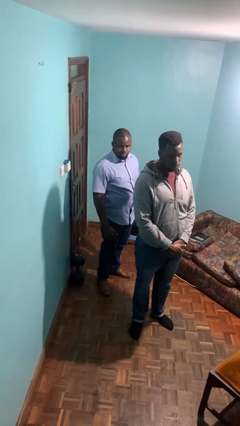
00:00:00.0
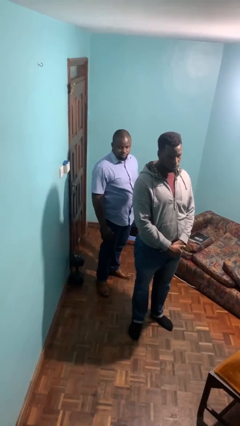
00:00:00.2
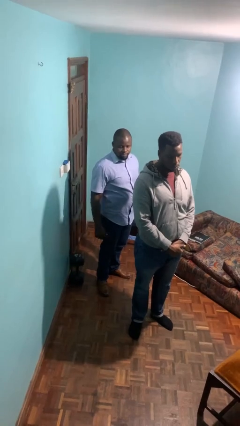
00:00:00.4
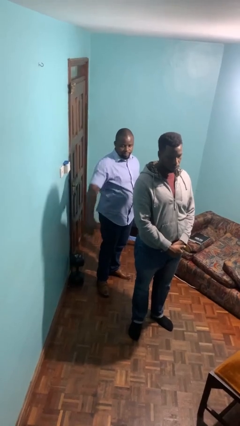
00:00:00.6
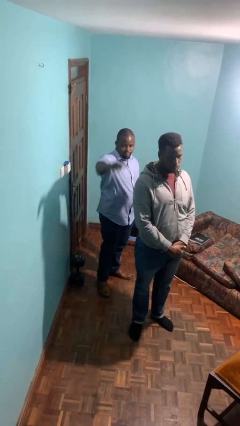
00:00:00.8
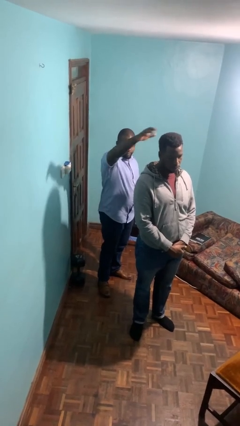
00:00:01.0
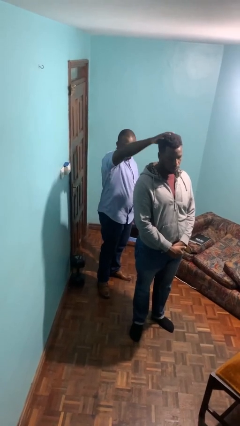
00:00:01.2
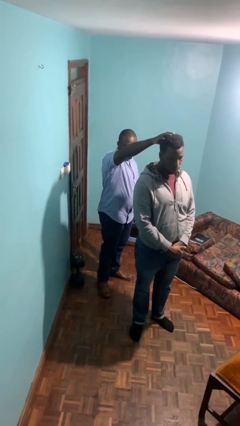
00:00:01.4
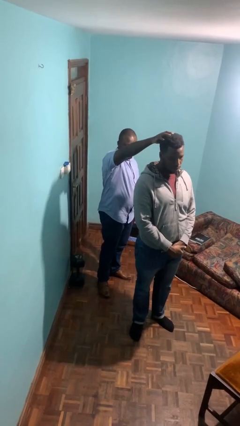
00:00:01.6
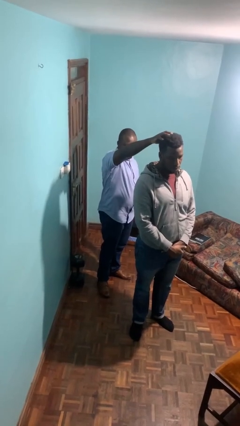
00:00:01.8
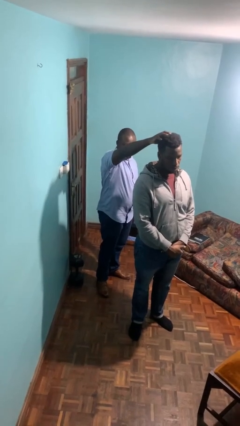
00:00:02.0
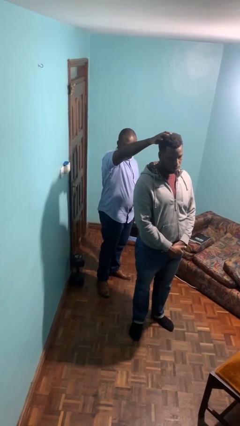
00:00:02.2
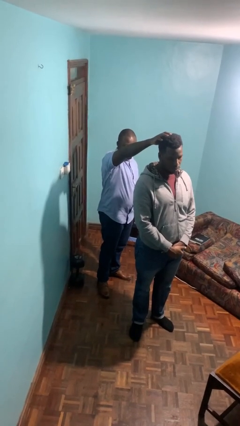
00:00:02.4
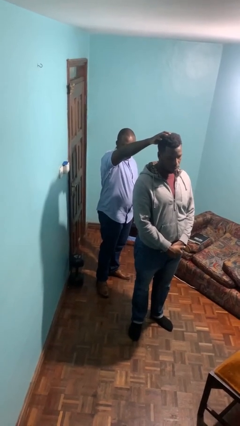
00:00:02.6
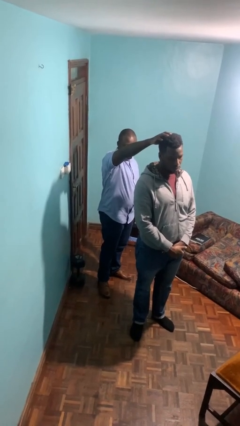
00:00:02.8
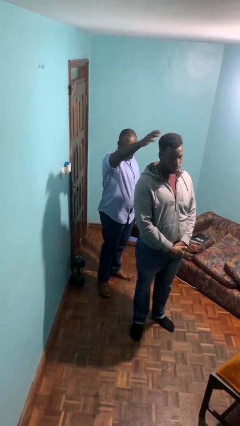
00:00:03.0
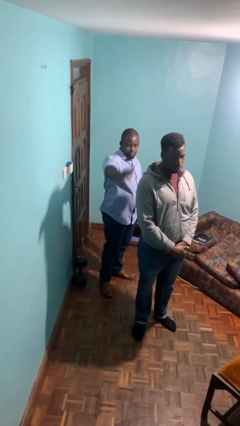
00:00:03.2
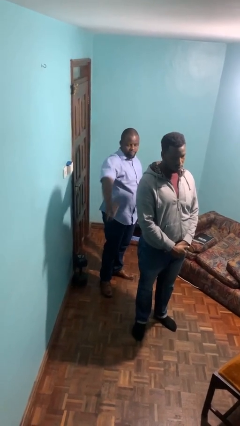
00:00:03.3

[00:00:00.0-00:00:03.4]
person grabs person by hair

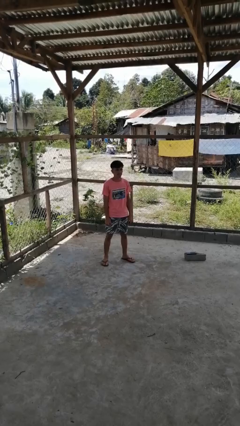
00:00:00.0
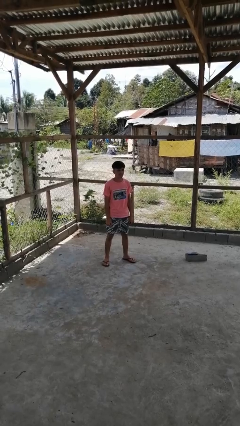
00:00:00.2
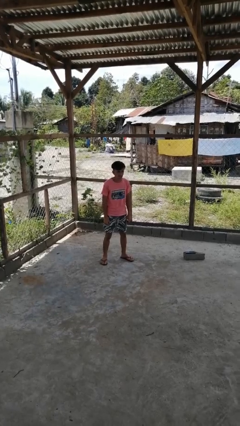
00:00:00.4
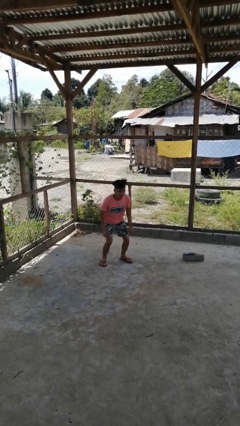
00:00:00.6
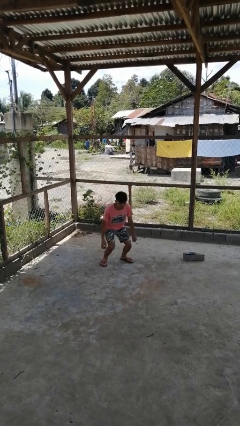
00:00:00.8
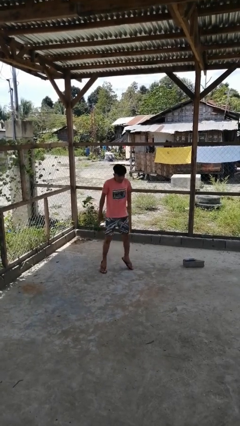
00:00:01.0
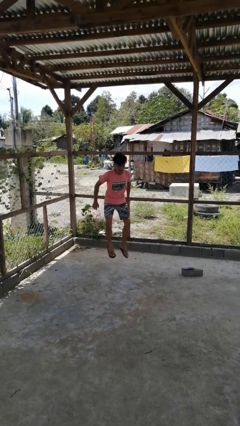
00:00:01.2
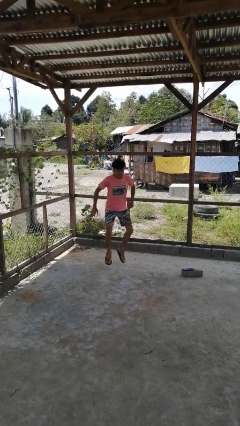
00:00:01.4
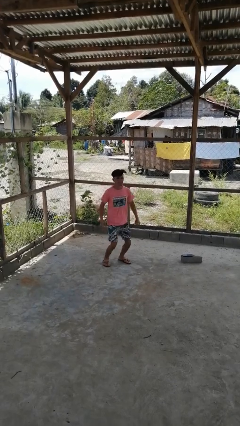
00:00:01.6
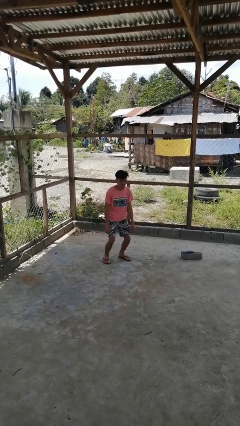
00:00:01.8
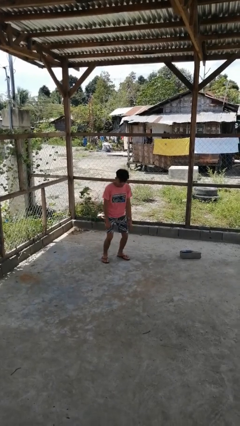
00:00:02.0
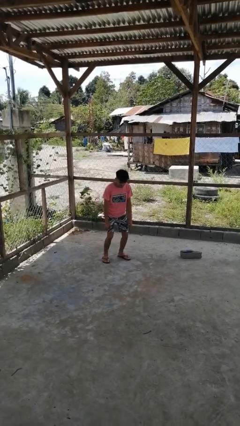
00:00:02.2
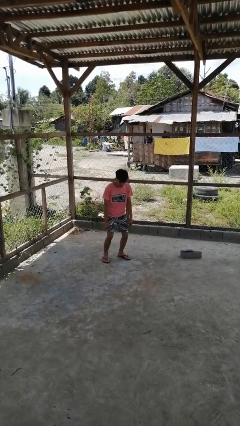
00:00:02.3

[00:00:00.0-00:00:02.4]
person jumps

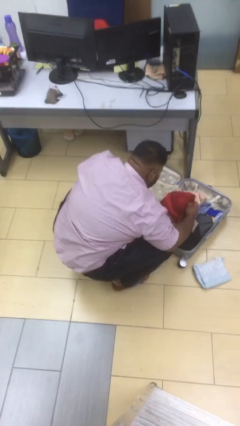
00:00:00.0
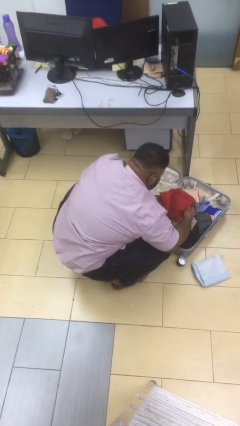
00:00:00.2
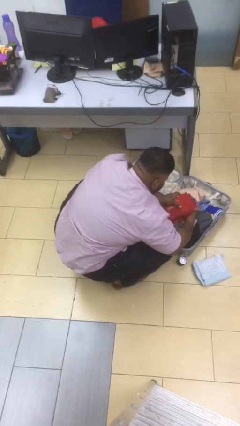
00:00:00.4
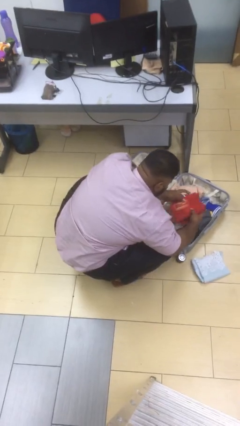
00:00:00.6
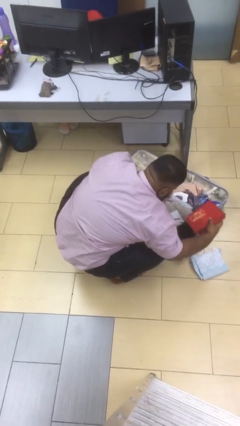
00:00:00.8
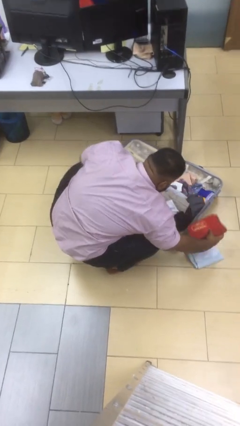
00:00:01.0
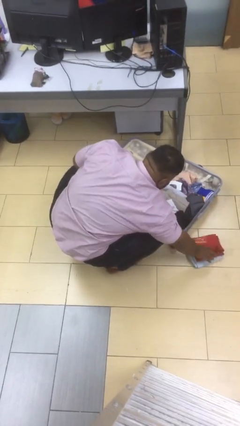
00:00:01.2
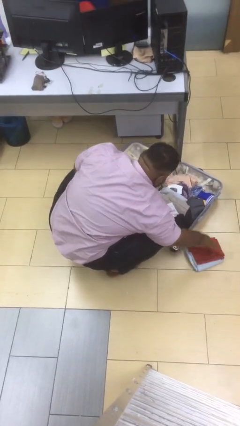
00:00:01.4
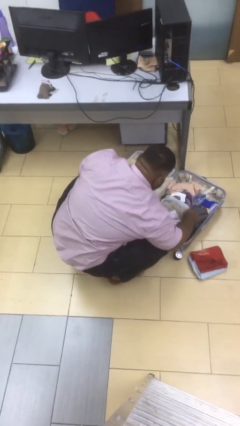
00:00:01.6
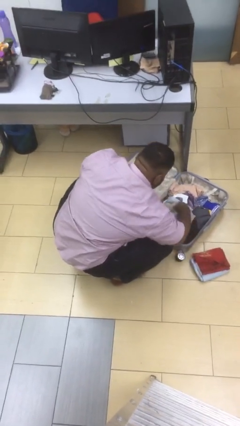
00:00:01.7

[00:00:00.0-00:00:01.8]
person unloads clothes from suitcase

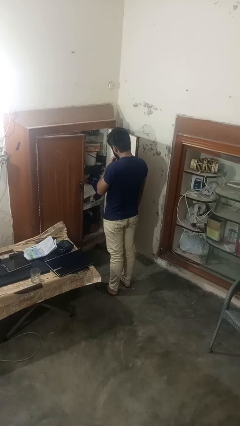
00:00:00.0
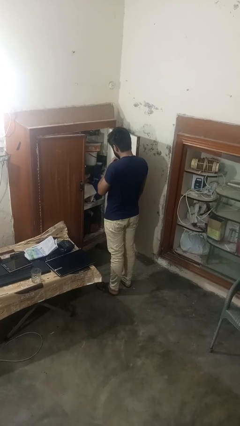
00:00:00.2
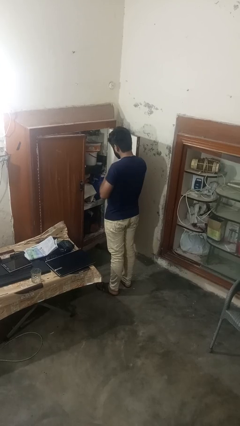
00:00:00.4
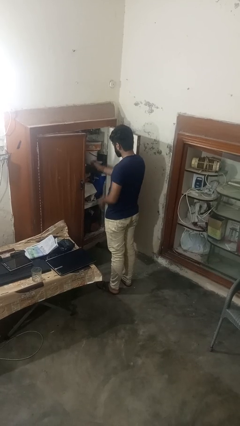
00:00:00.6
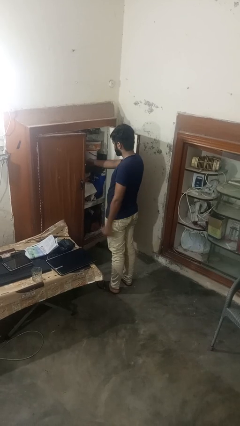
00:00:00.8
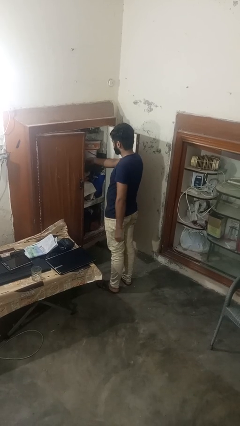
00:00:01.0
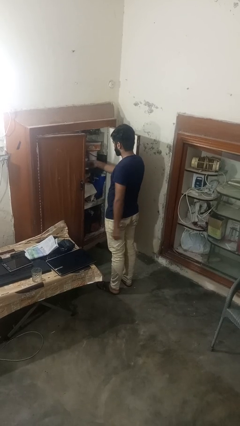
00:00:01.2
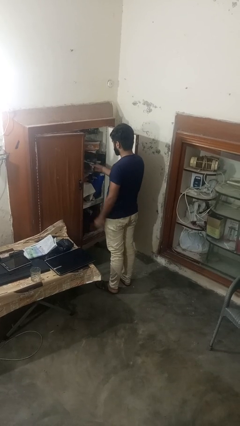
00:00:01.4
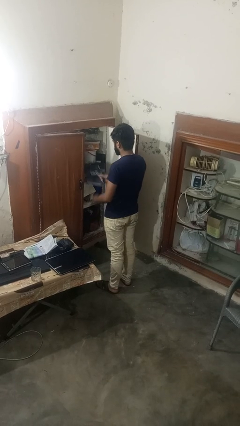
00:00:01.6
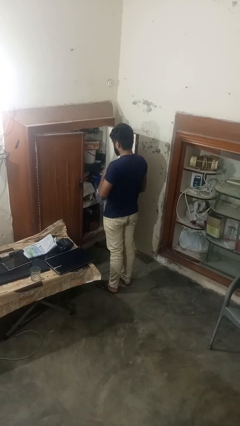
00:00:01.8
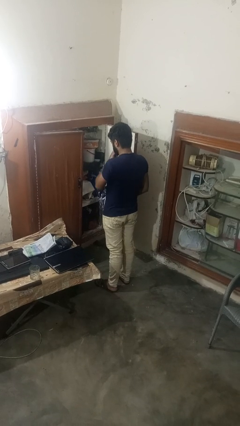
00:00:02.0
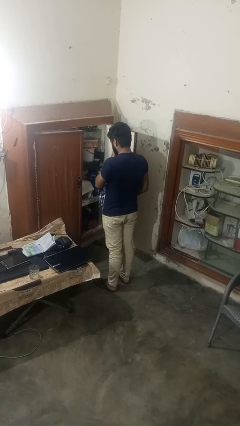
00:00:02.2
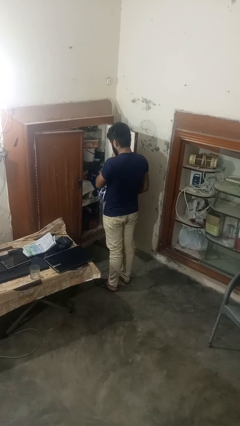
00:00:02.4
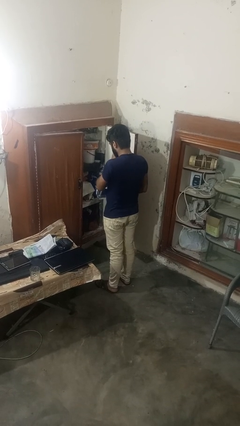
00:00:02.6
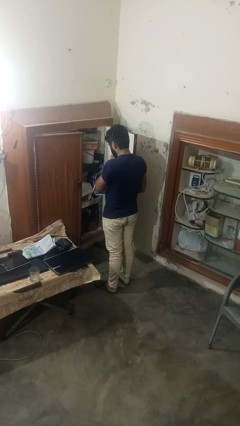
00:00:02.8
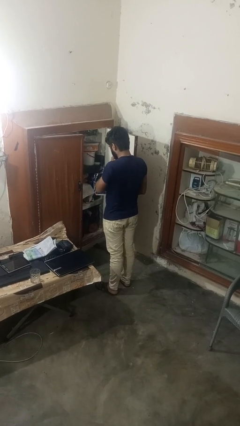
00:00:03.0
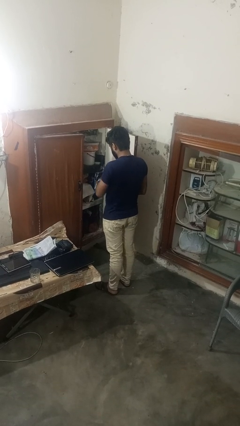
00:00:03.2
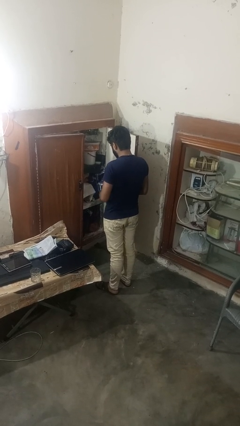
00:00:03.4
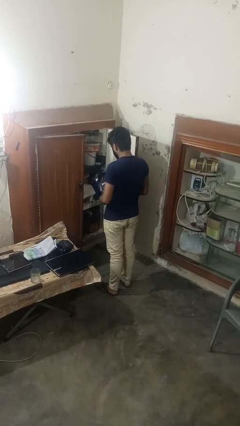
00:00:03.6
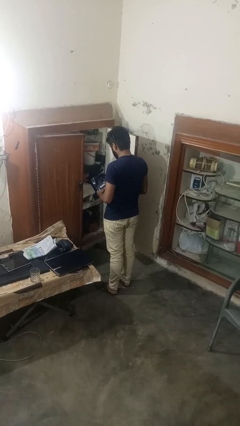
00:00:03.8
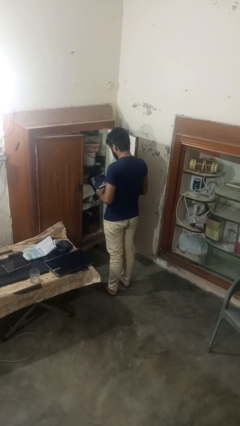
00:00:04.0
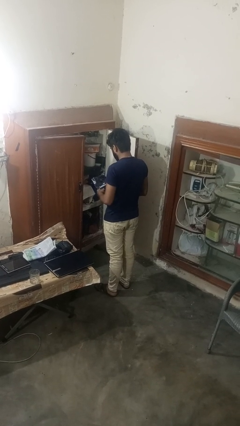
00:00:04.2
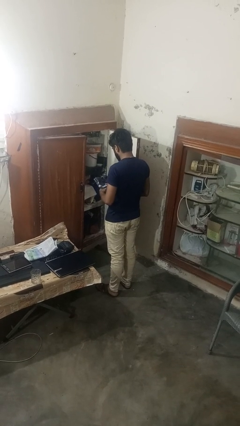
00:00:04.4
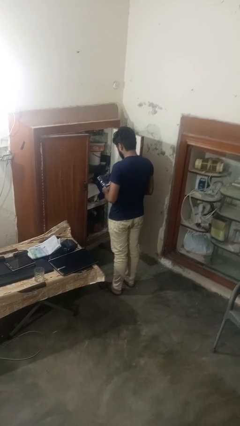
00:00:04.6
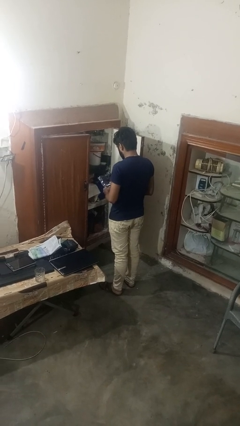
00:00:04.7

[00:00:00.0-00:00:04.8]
person picks up object from cabinet

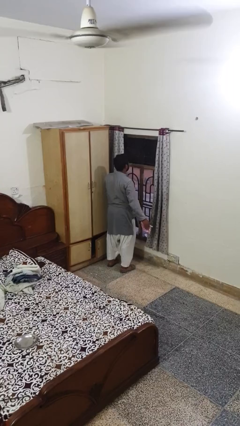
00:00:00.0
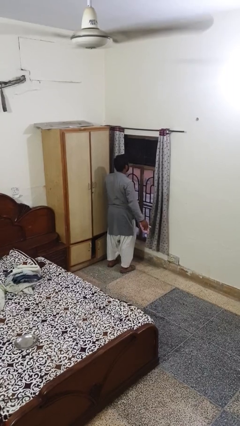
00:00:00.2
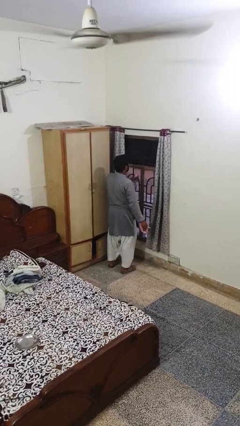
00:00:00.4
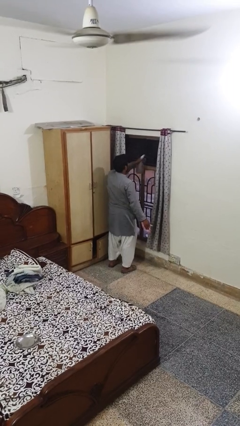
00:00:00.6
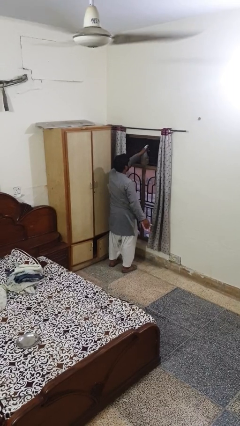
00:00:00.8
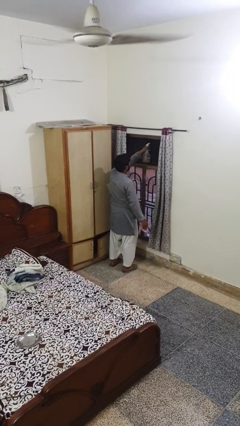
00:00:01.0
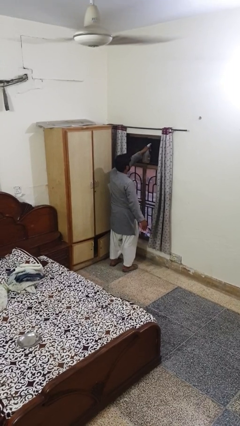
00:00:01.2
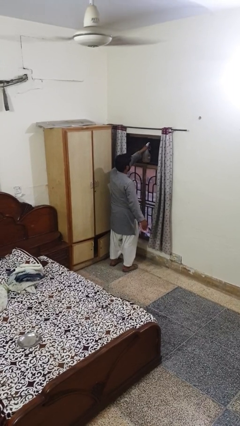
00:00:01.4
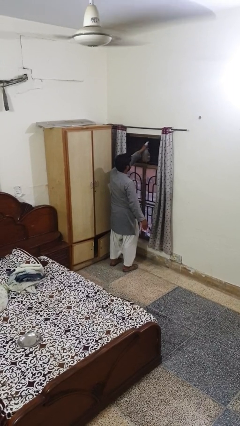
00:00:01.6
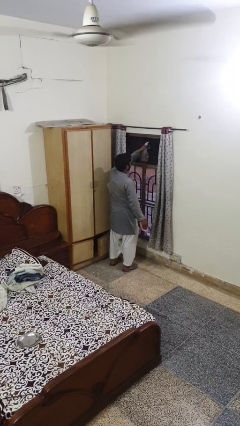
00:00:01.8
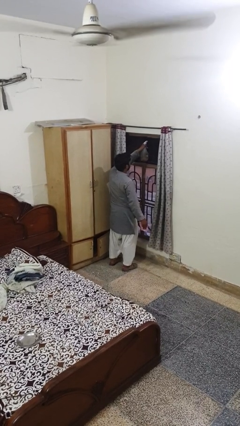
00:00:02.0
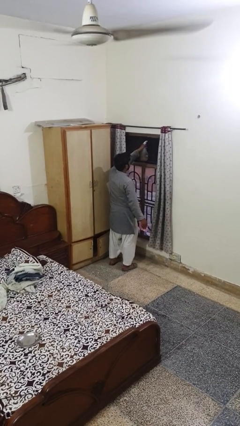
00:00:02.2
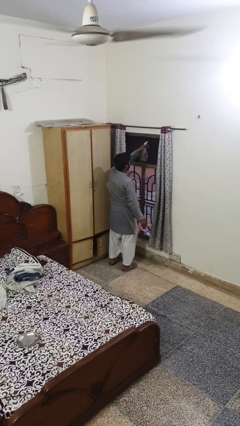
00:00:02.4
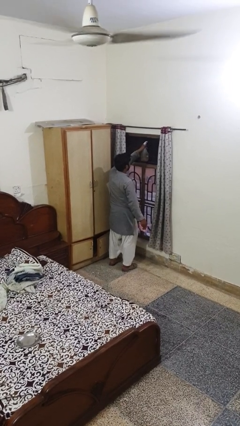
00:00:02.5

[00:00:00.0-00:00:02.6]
person sprays from bottle

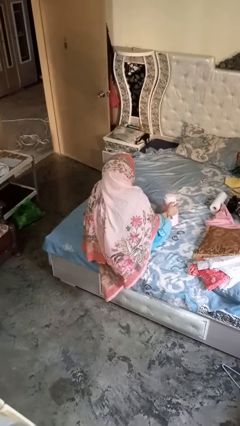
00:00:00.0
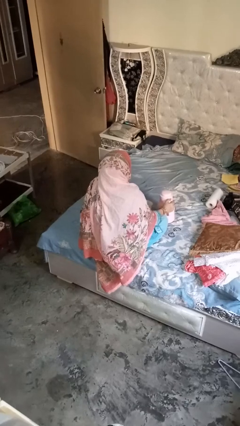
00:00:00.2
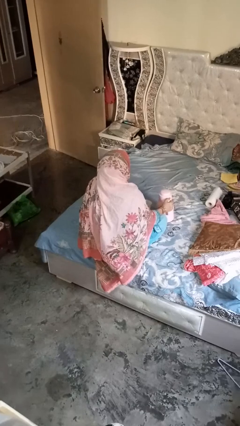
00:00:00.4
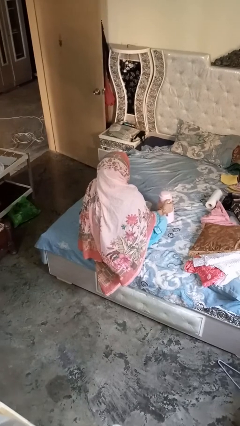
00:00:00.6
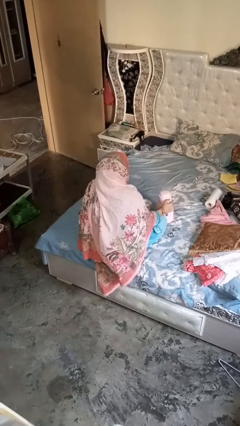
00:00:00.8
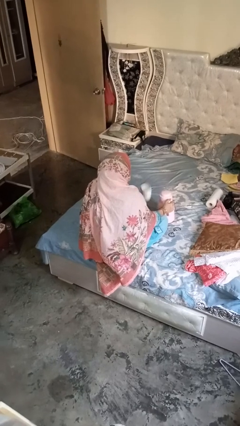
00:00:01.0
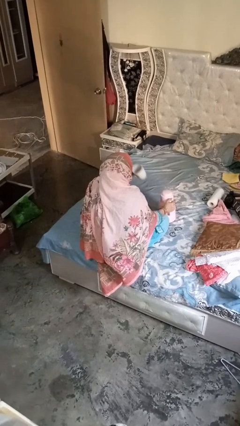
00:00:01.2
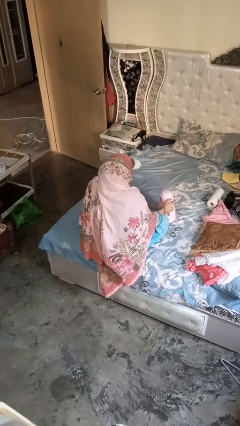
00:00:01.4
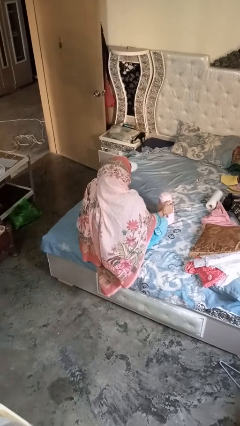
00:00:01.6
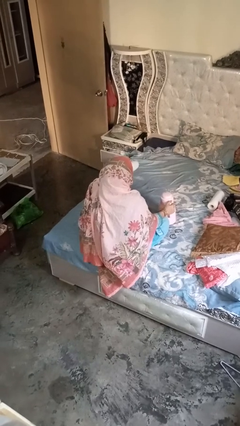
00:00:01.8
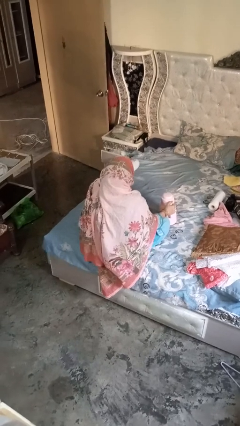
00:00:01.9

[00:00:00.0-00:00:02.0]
person pours coffee into mug
